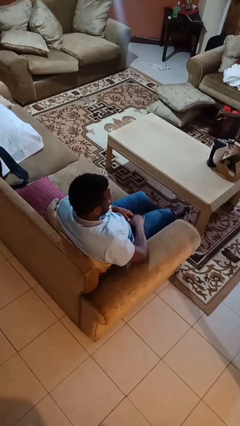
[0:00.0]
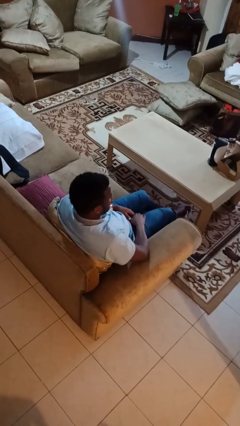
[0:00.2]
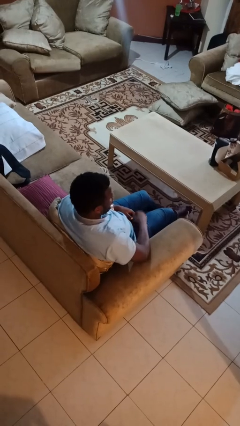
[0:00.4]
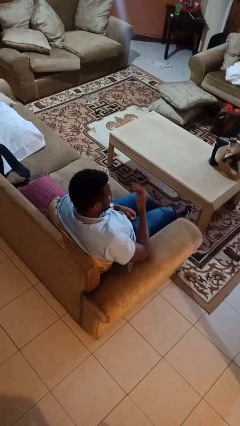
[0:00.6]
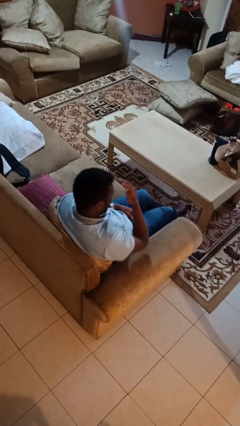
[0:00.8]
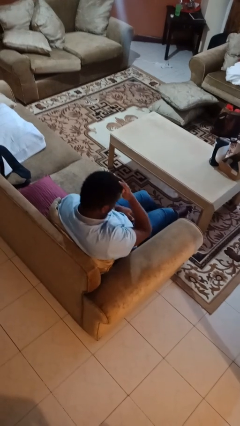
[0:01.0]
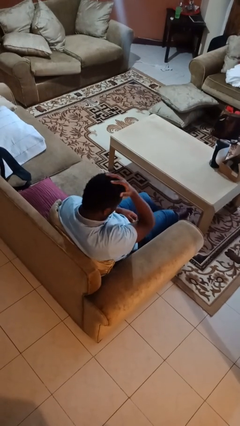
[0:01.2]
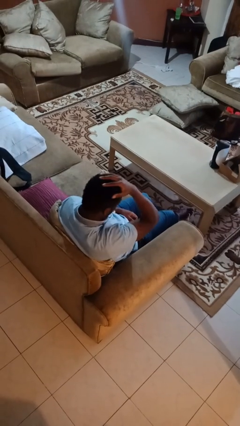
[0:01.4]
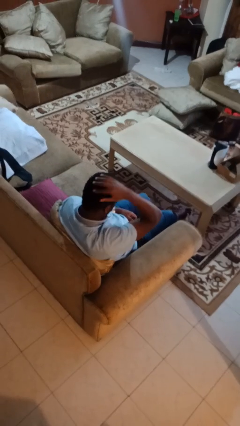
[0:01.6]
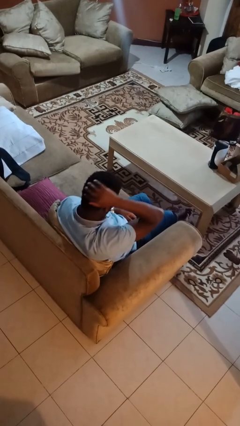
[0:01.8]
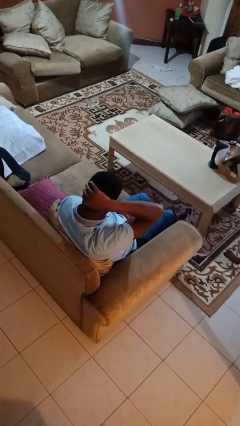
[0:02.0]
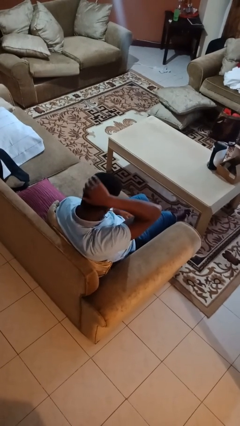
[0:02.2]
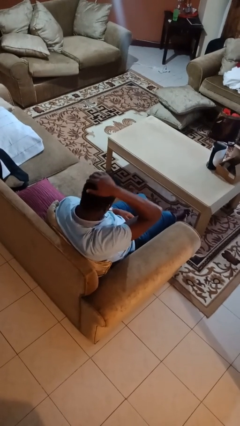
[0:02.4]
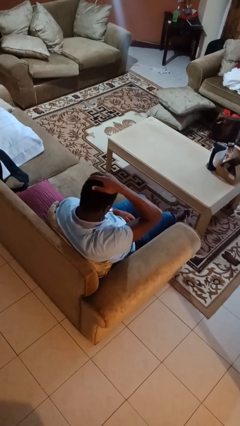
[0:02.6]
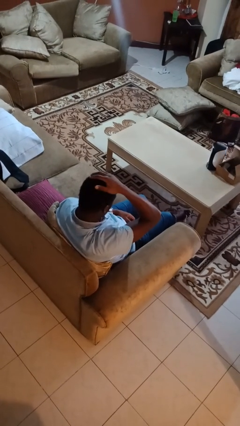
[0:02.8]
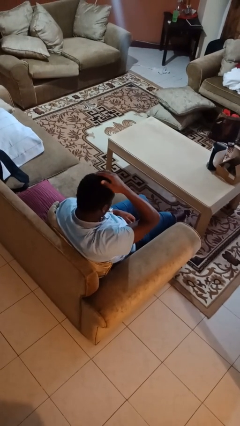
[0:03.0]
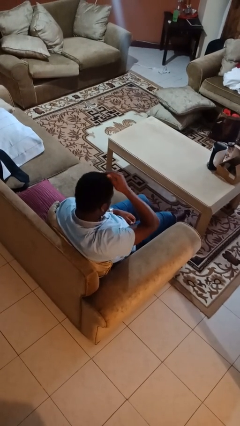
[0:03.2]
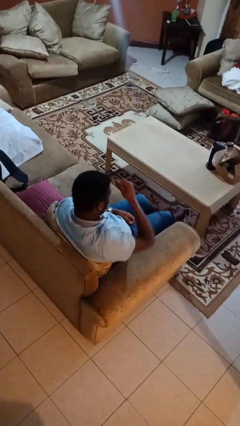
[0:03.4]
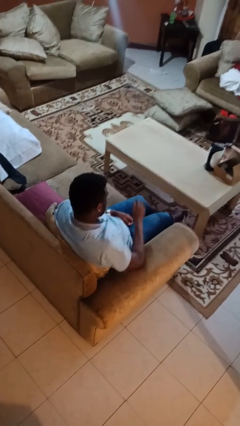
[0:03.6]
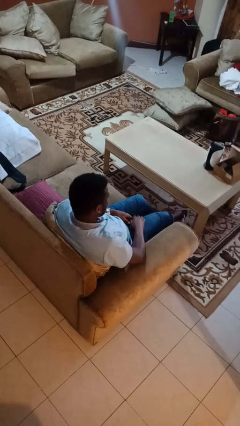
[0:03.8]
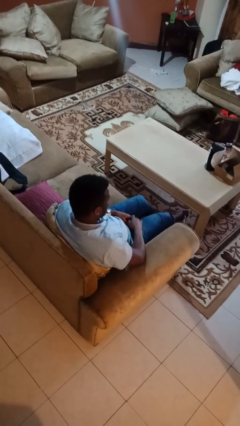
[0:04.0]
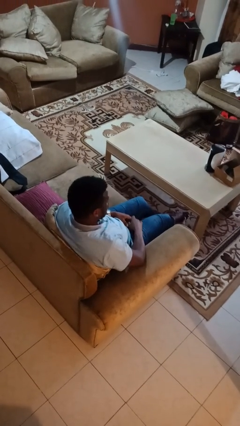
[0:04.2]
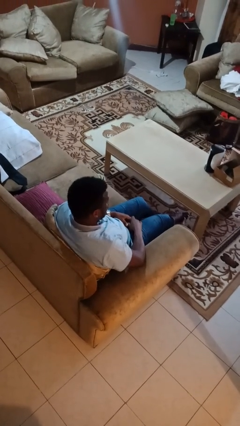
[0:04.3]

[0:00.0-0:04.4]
person strokes hair

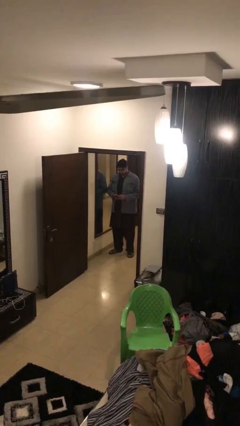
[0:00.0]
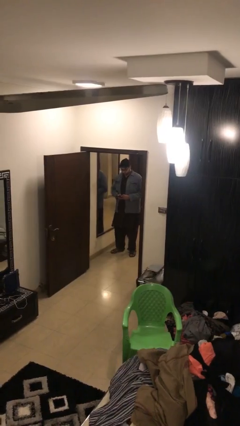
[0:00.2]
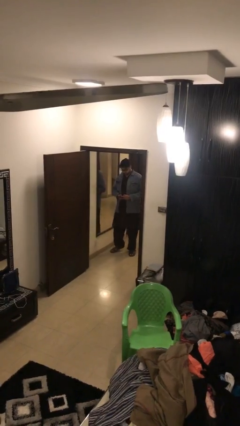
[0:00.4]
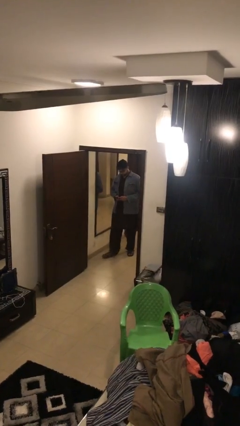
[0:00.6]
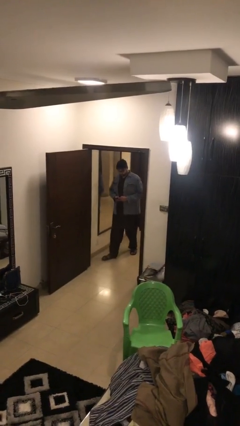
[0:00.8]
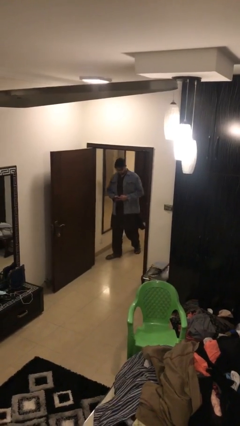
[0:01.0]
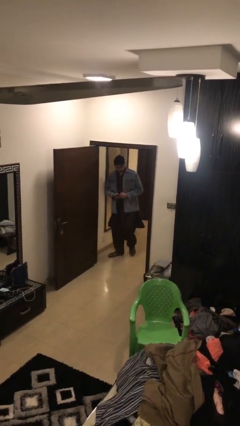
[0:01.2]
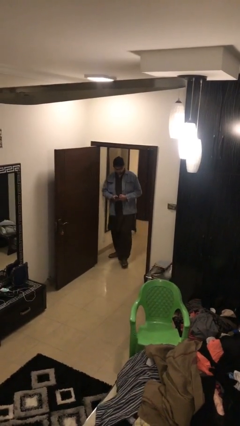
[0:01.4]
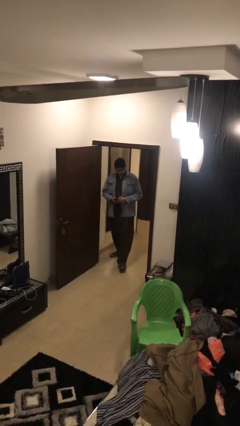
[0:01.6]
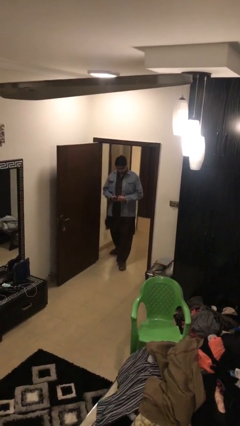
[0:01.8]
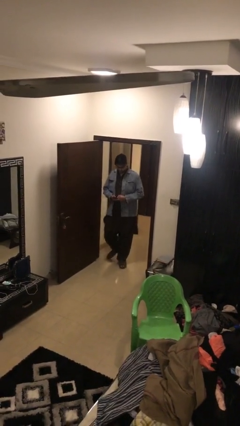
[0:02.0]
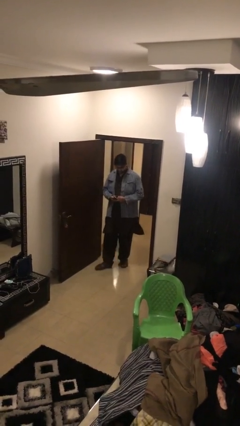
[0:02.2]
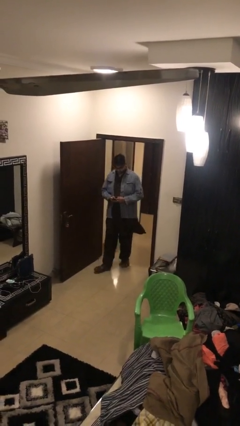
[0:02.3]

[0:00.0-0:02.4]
person enters scene through structure

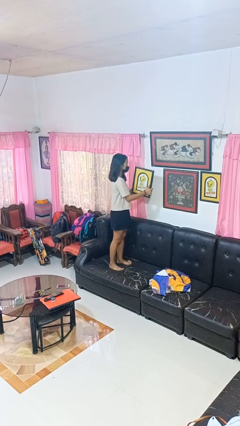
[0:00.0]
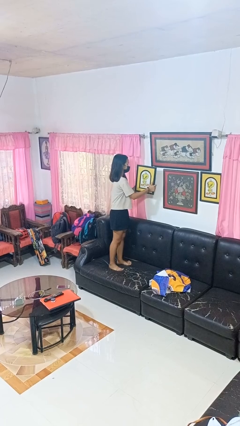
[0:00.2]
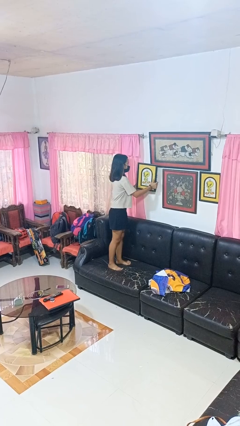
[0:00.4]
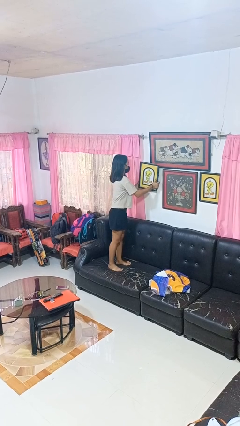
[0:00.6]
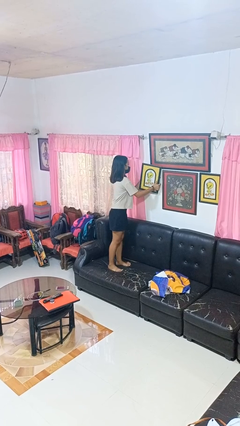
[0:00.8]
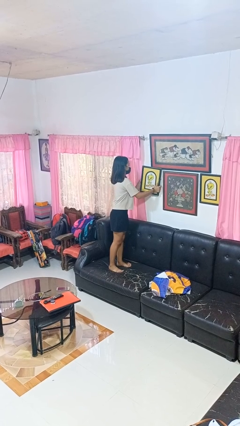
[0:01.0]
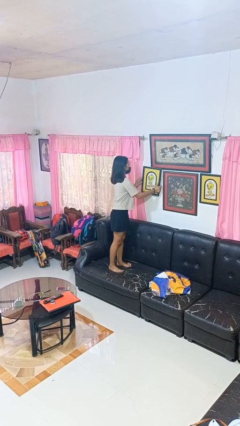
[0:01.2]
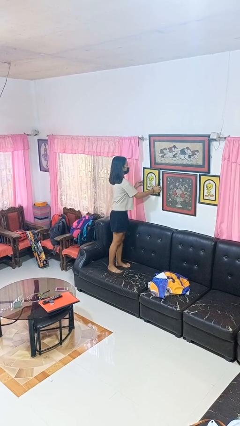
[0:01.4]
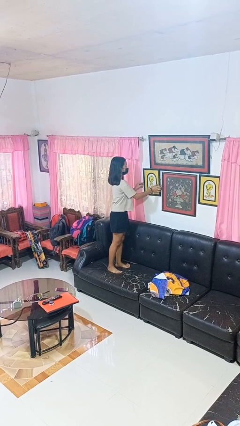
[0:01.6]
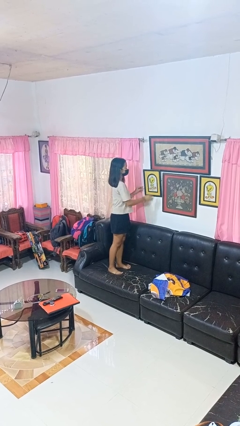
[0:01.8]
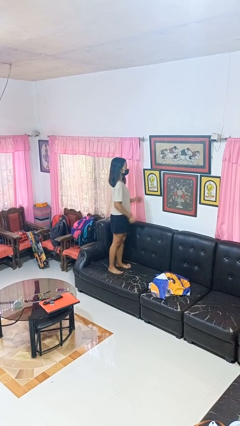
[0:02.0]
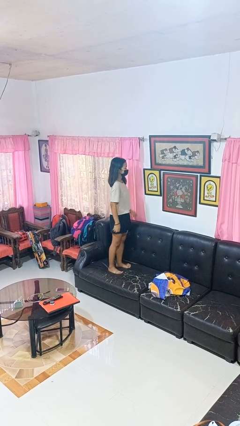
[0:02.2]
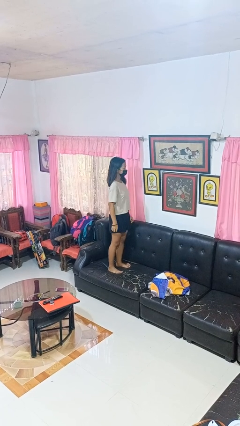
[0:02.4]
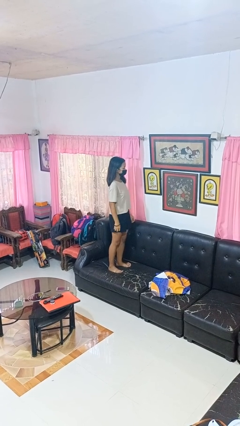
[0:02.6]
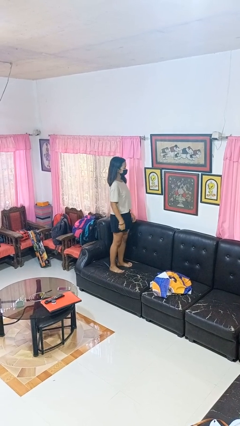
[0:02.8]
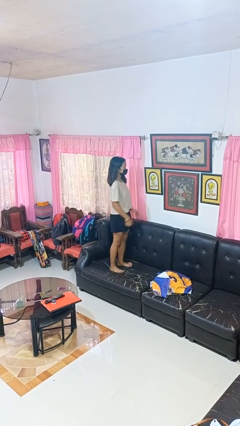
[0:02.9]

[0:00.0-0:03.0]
person puts up picture frame

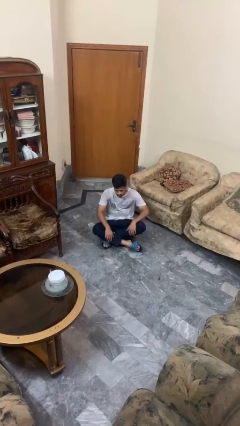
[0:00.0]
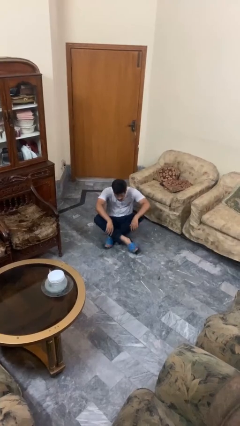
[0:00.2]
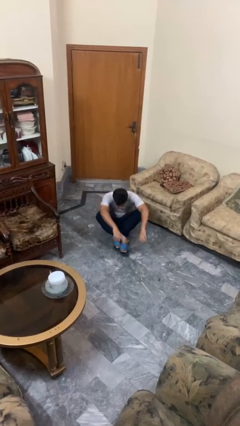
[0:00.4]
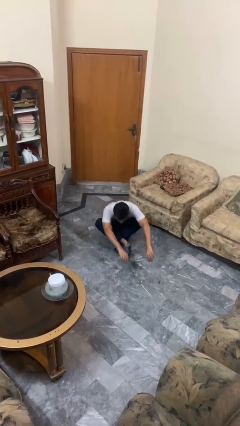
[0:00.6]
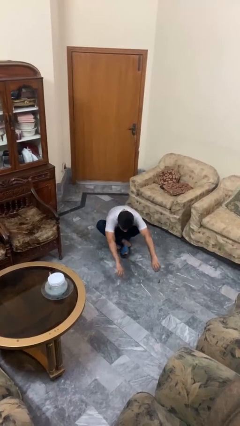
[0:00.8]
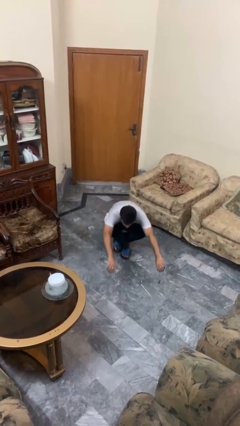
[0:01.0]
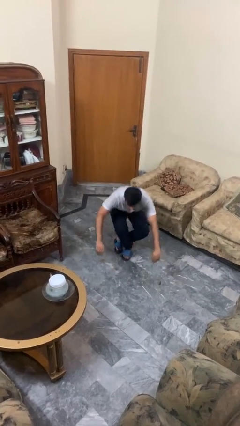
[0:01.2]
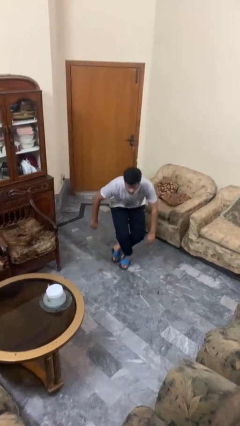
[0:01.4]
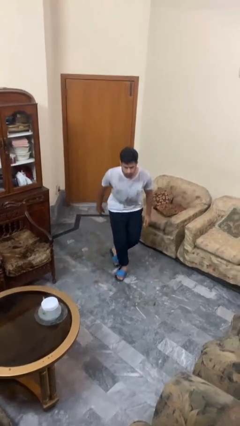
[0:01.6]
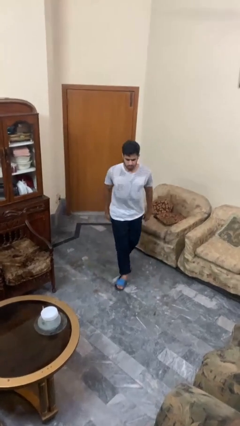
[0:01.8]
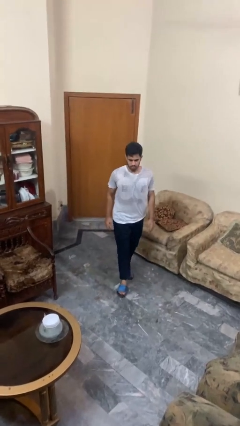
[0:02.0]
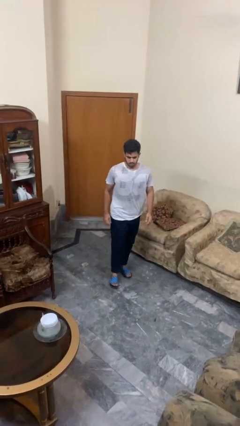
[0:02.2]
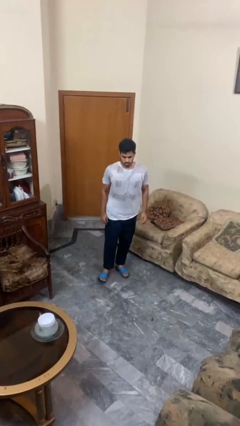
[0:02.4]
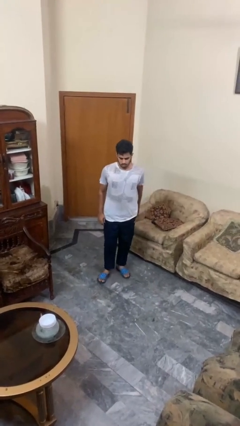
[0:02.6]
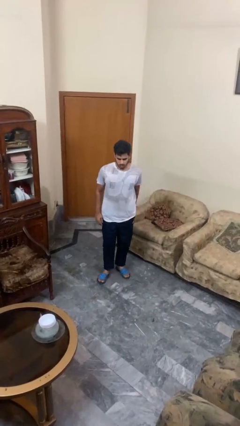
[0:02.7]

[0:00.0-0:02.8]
person stands up from floor

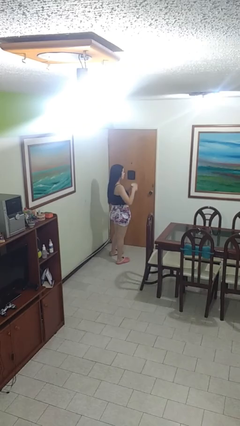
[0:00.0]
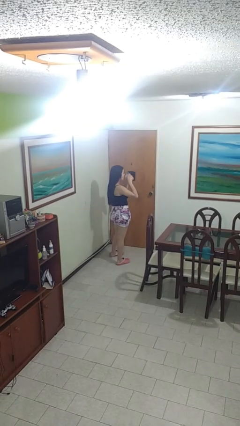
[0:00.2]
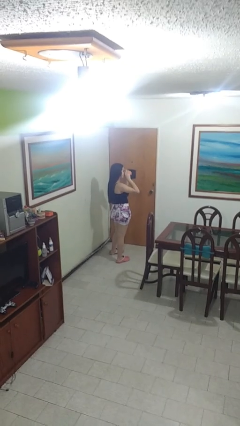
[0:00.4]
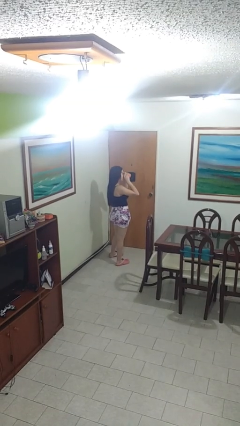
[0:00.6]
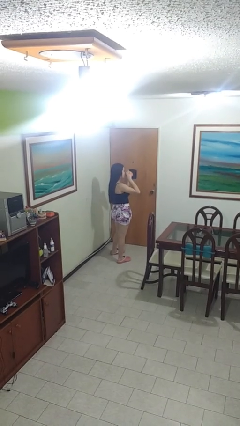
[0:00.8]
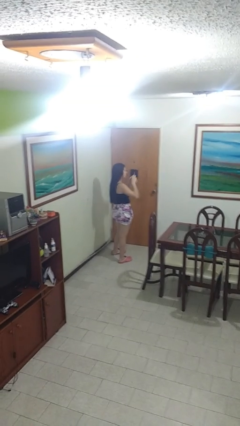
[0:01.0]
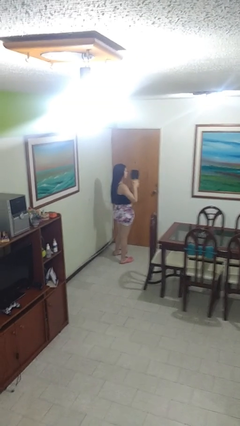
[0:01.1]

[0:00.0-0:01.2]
person drinks from mug

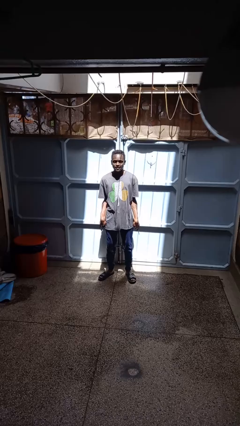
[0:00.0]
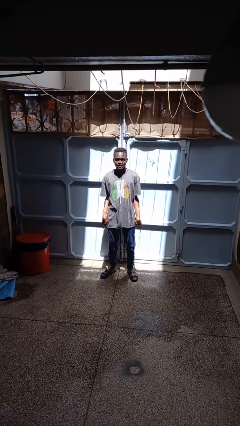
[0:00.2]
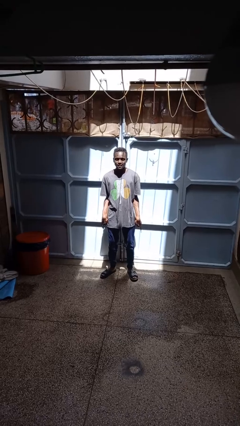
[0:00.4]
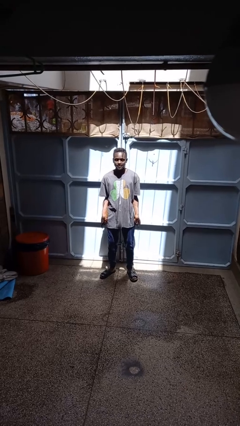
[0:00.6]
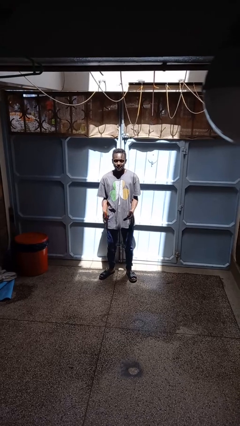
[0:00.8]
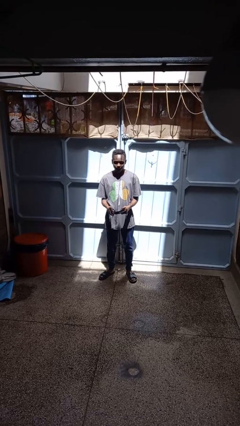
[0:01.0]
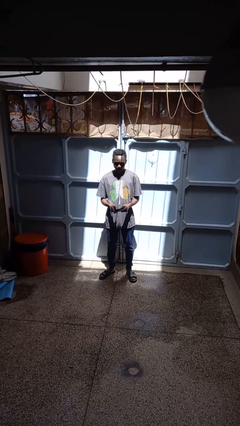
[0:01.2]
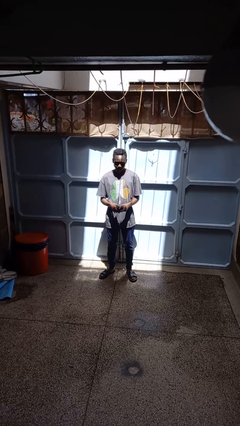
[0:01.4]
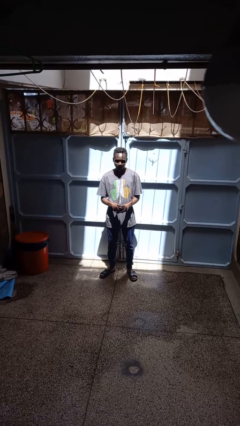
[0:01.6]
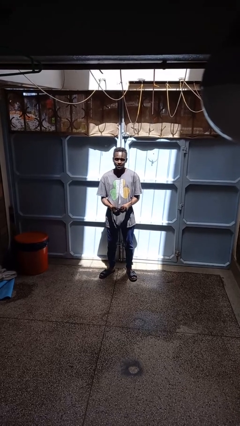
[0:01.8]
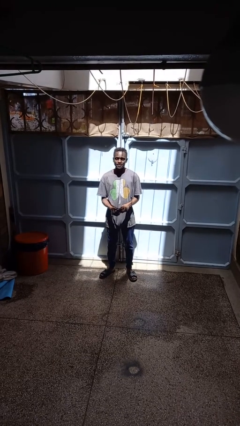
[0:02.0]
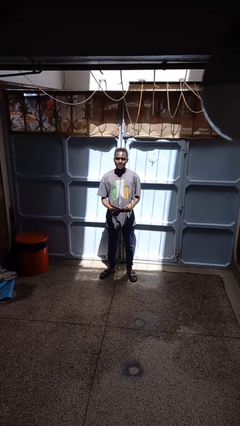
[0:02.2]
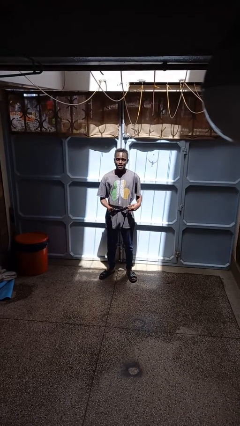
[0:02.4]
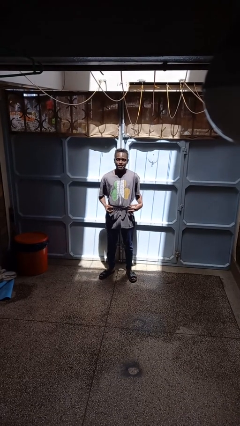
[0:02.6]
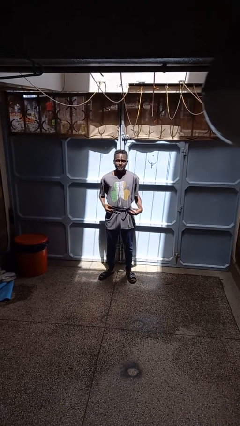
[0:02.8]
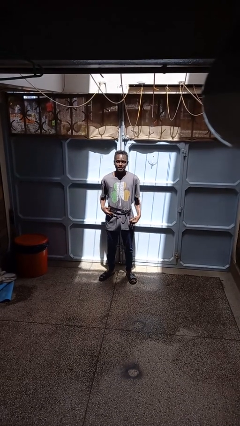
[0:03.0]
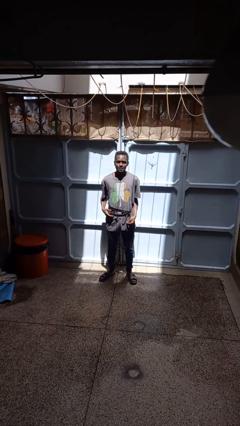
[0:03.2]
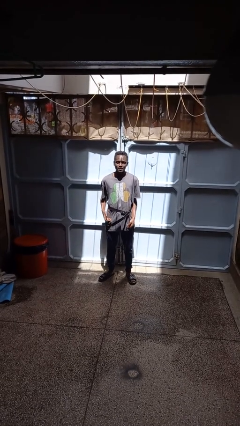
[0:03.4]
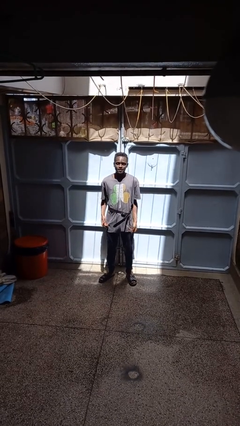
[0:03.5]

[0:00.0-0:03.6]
person puts on belt
